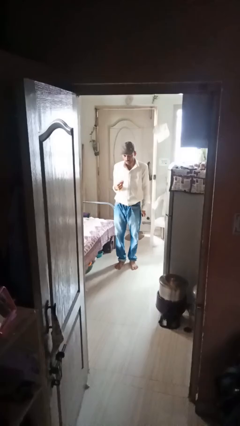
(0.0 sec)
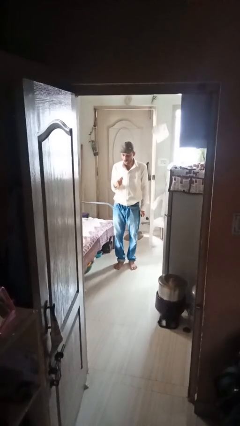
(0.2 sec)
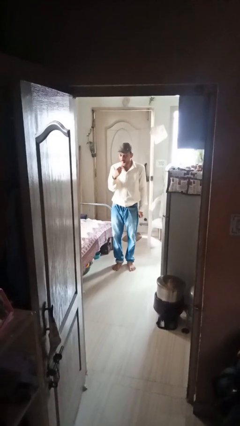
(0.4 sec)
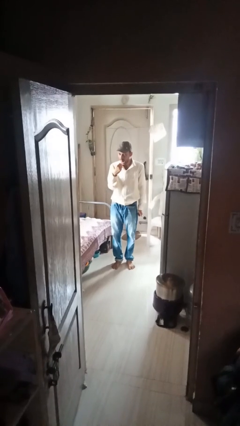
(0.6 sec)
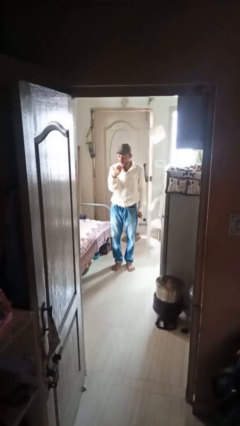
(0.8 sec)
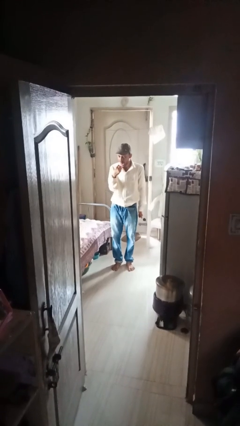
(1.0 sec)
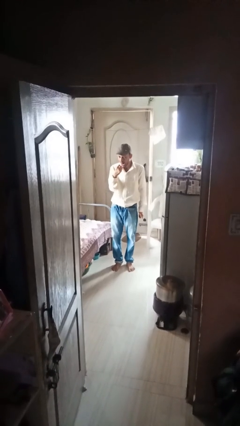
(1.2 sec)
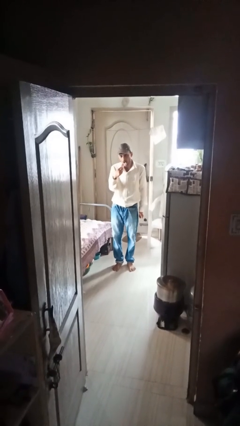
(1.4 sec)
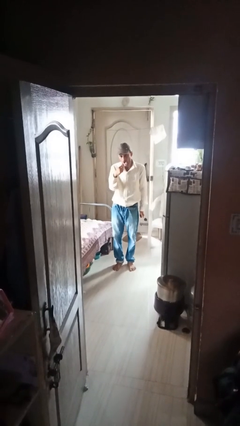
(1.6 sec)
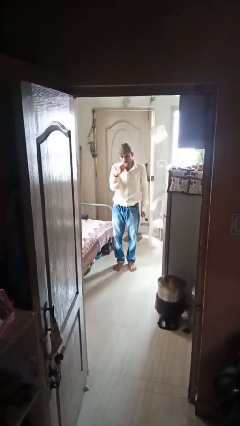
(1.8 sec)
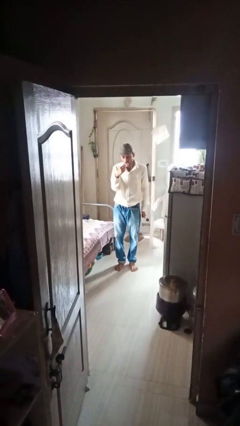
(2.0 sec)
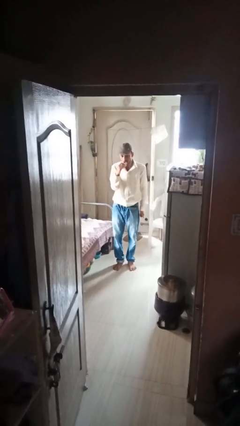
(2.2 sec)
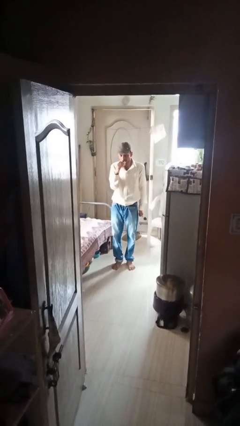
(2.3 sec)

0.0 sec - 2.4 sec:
person brushes teeth

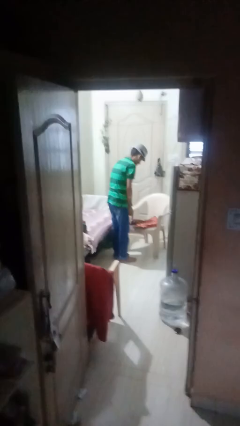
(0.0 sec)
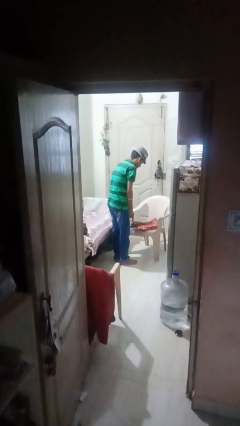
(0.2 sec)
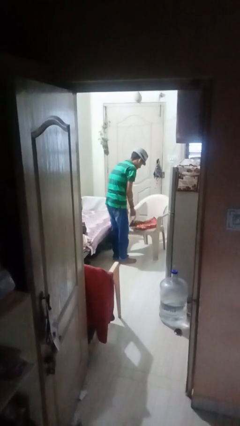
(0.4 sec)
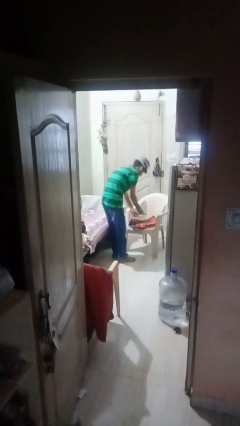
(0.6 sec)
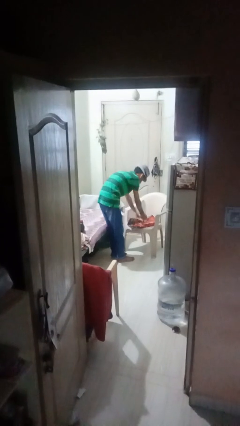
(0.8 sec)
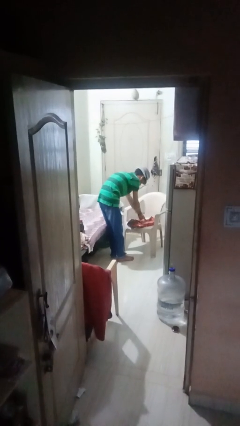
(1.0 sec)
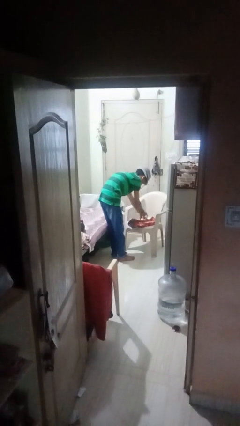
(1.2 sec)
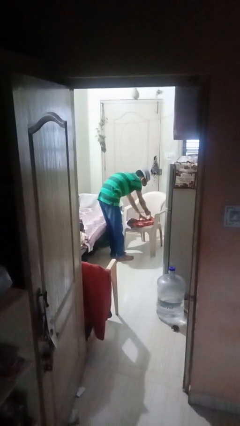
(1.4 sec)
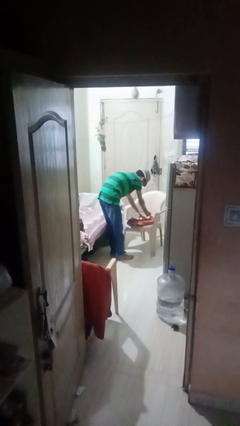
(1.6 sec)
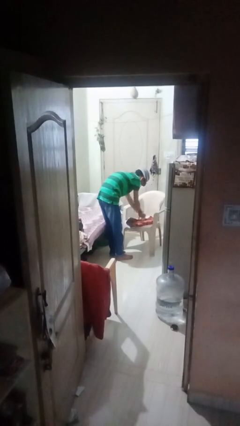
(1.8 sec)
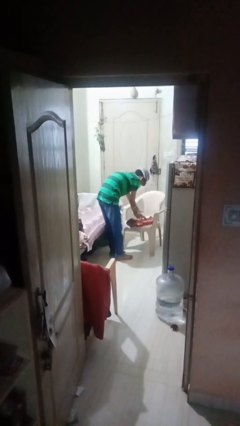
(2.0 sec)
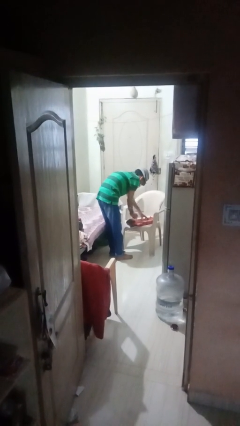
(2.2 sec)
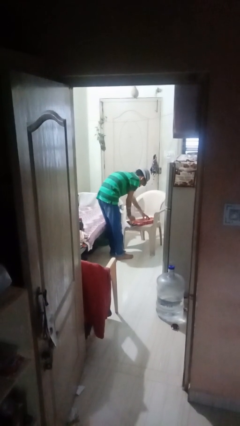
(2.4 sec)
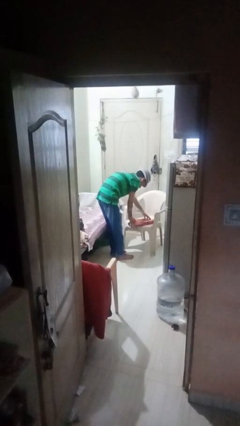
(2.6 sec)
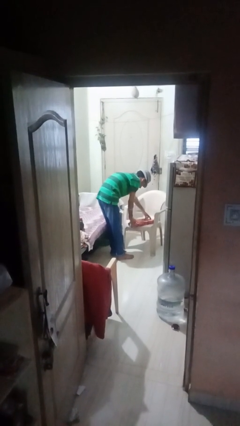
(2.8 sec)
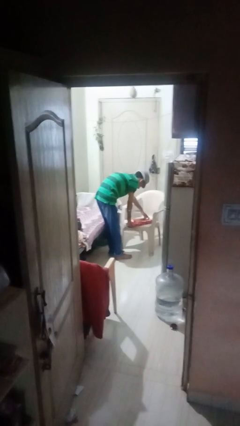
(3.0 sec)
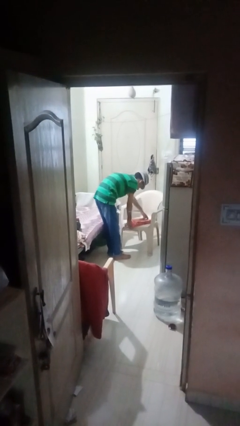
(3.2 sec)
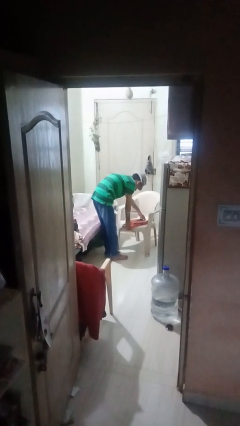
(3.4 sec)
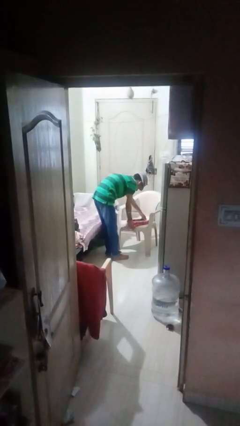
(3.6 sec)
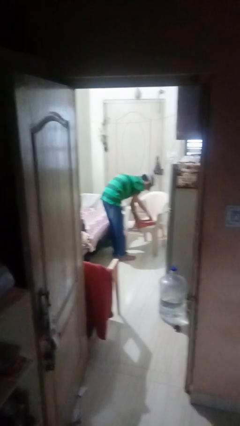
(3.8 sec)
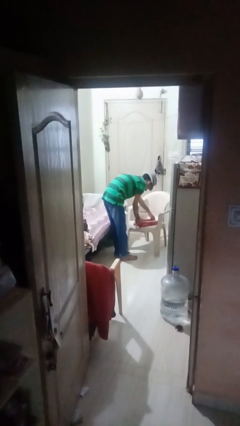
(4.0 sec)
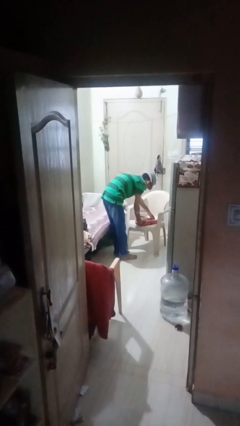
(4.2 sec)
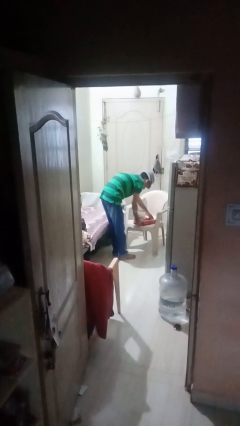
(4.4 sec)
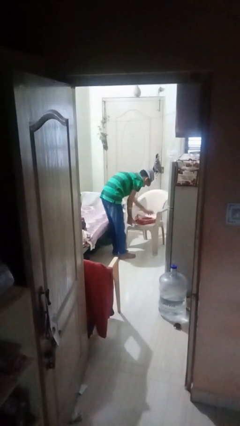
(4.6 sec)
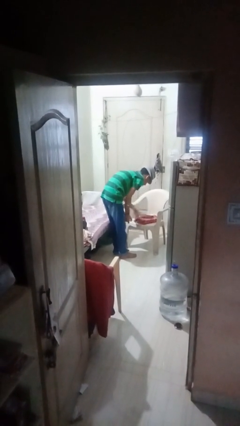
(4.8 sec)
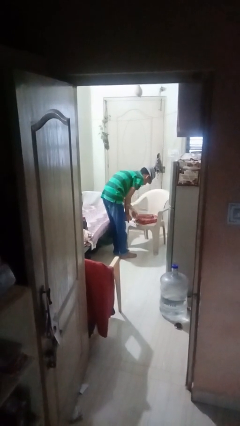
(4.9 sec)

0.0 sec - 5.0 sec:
person wraps box

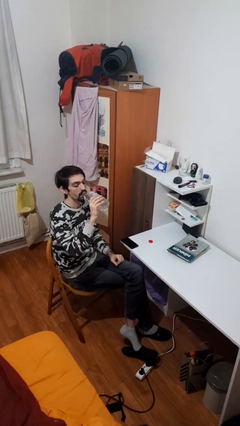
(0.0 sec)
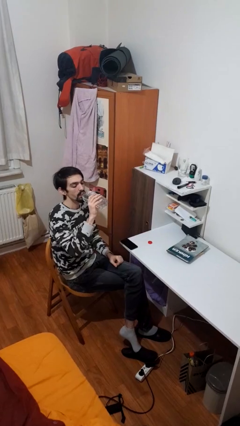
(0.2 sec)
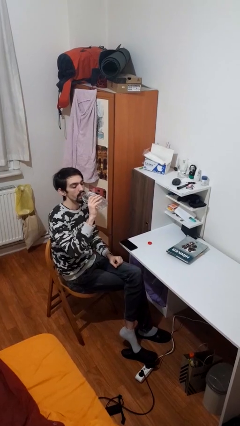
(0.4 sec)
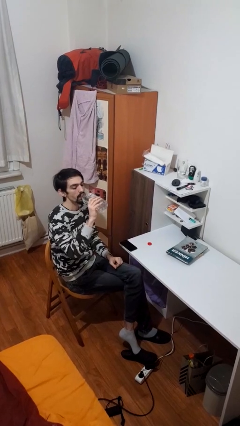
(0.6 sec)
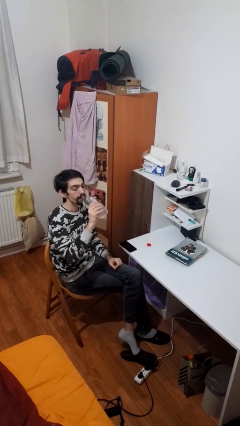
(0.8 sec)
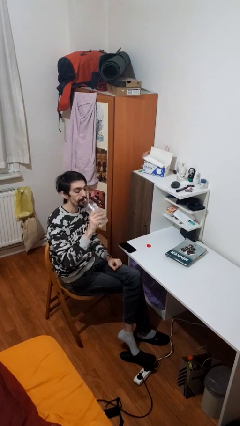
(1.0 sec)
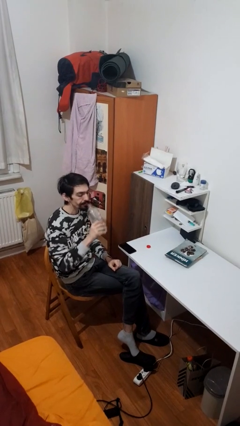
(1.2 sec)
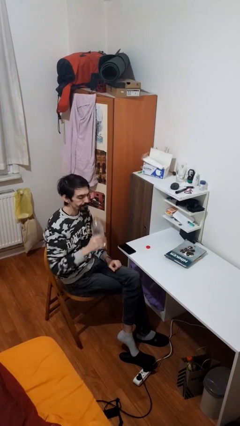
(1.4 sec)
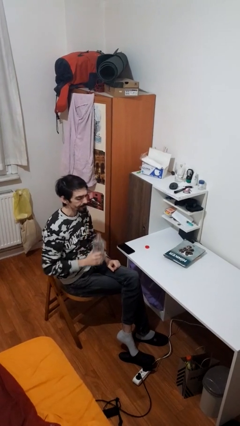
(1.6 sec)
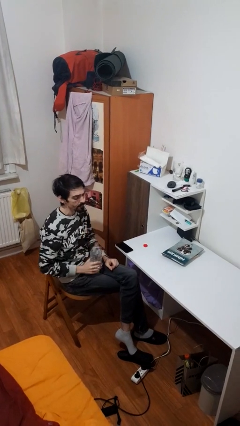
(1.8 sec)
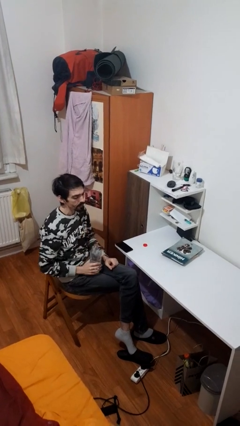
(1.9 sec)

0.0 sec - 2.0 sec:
person drinks from bottle

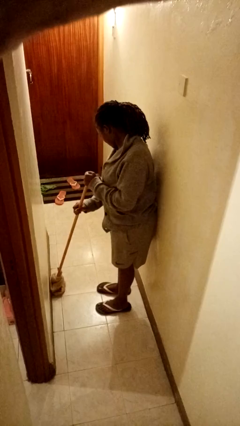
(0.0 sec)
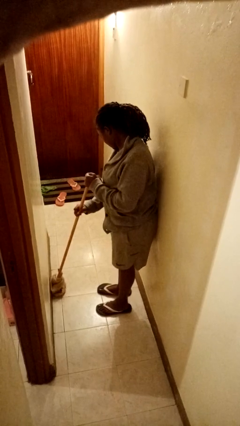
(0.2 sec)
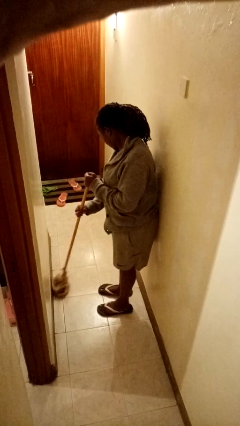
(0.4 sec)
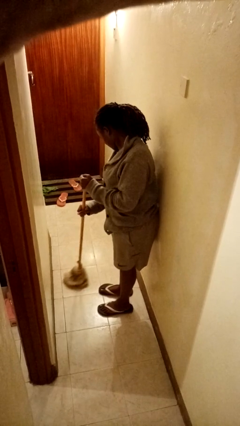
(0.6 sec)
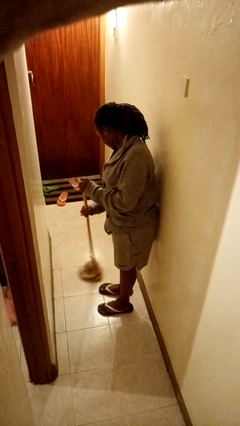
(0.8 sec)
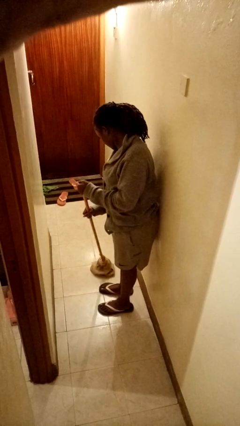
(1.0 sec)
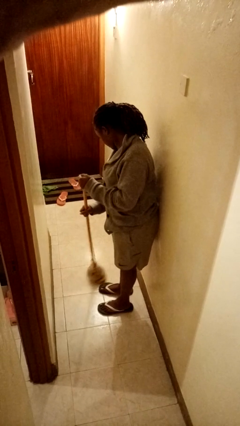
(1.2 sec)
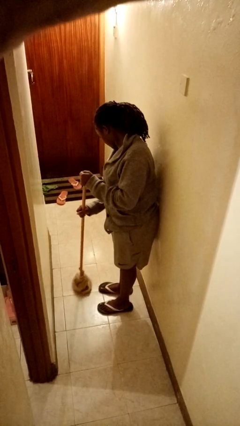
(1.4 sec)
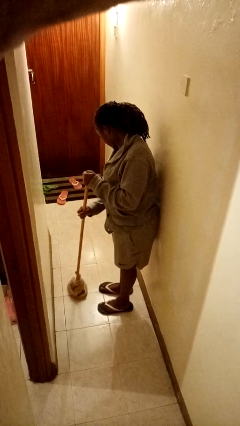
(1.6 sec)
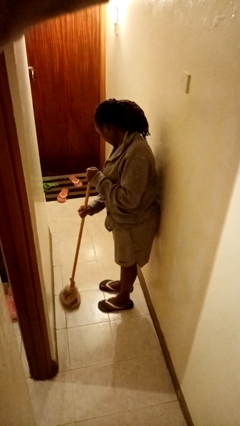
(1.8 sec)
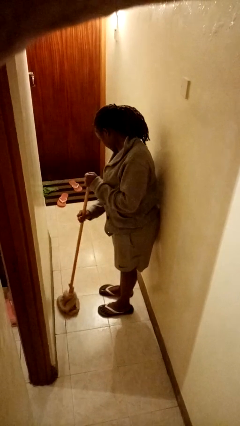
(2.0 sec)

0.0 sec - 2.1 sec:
person mops

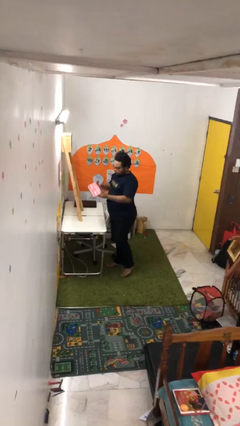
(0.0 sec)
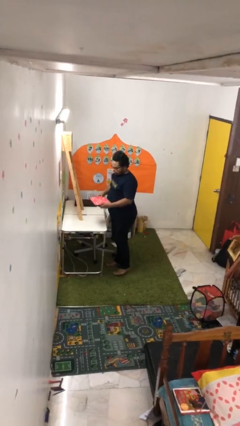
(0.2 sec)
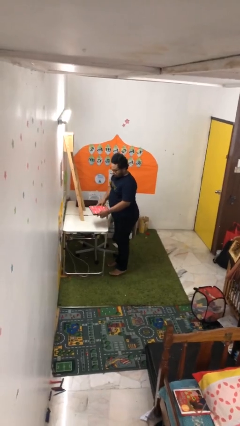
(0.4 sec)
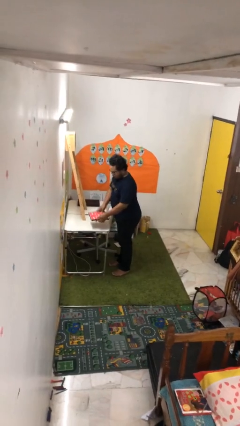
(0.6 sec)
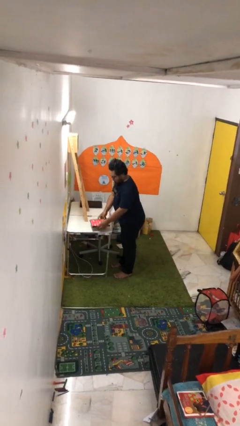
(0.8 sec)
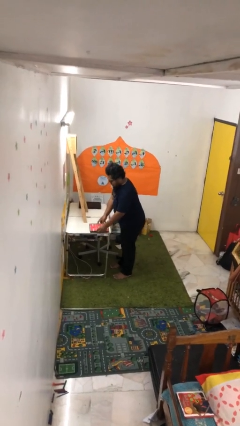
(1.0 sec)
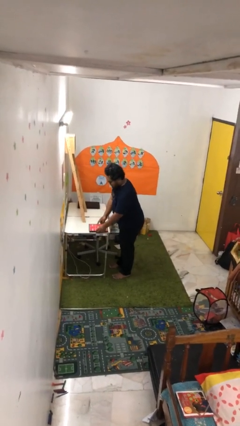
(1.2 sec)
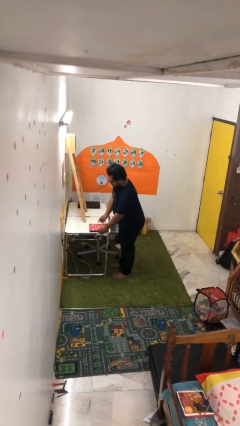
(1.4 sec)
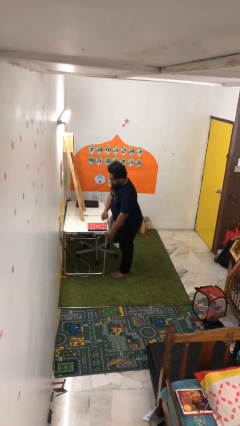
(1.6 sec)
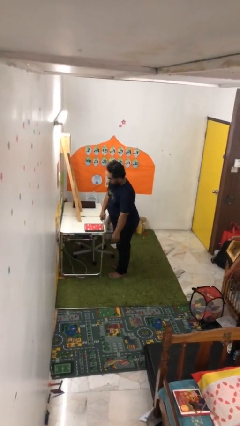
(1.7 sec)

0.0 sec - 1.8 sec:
person puts down object on table

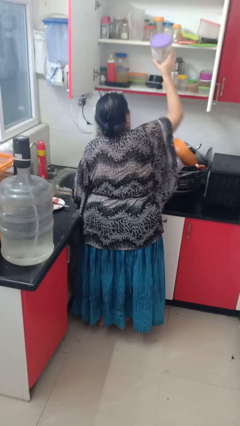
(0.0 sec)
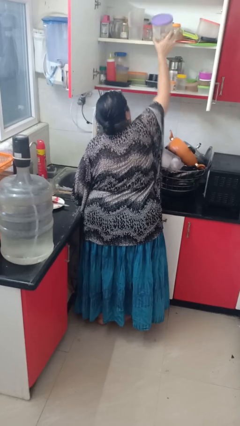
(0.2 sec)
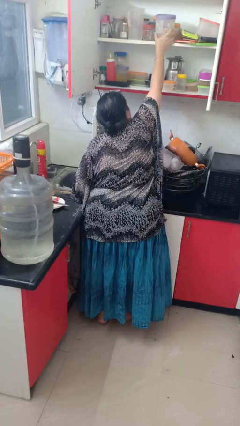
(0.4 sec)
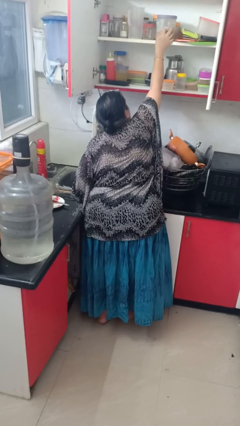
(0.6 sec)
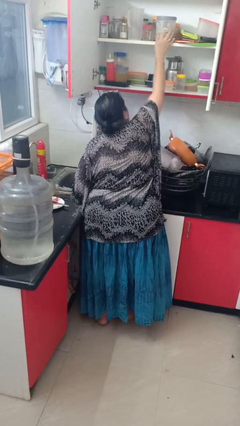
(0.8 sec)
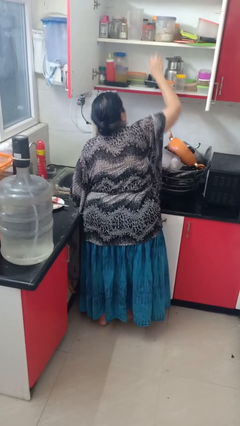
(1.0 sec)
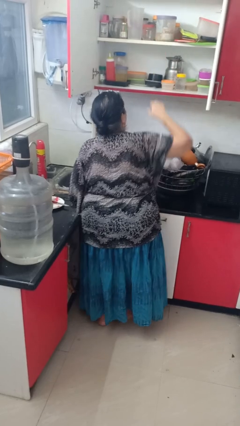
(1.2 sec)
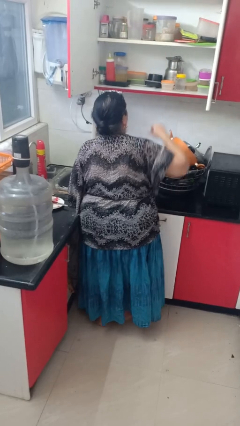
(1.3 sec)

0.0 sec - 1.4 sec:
person takes object from cabinet

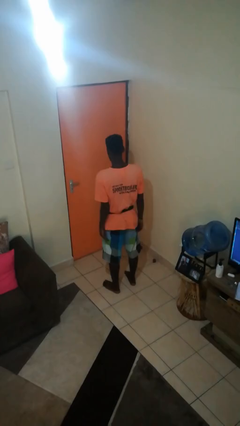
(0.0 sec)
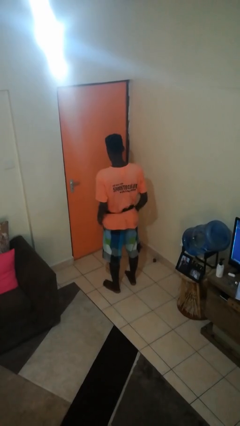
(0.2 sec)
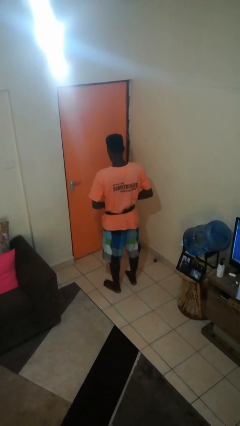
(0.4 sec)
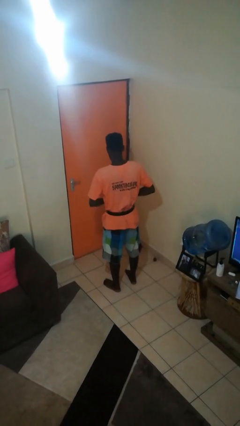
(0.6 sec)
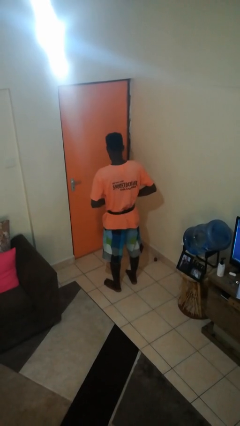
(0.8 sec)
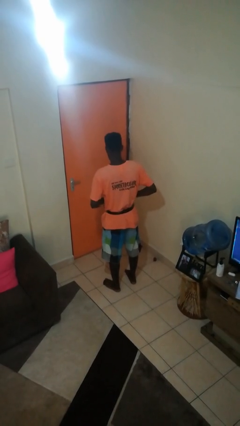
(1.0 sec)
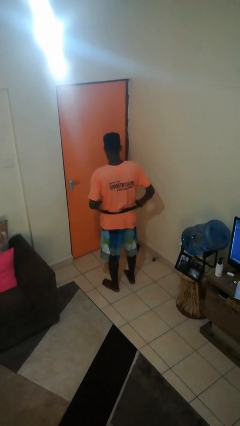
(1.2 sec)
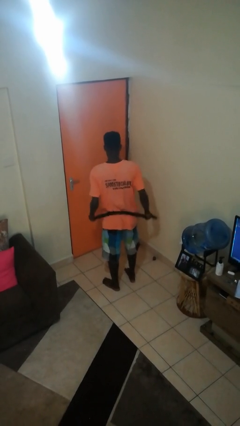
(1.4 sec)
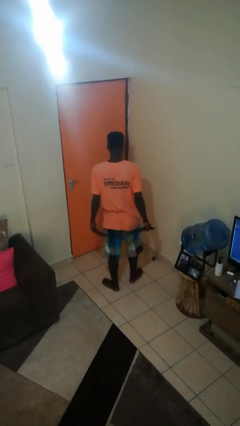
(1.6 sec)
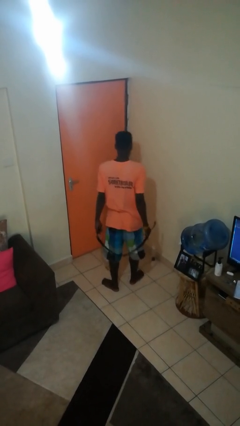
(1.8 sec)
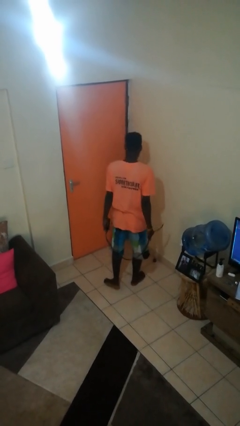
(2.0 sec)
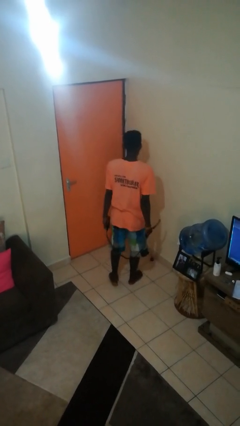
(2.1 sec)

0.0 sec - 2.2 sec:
person takes off belt

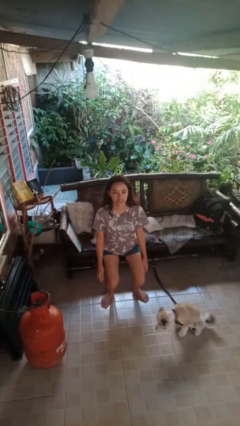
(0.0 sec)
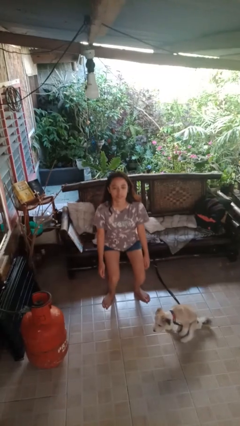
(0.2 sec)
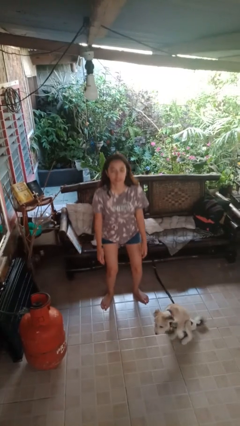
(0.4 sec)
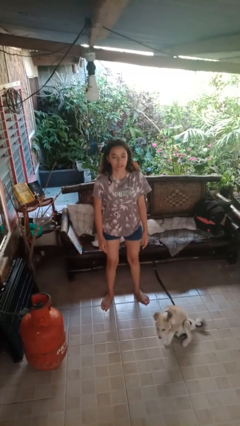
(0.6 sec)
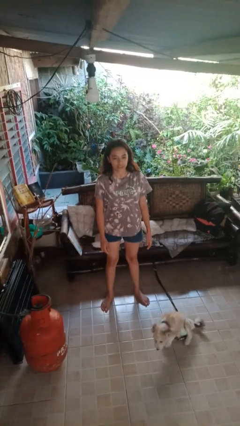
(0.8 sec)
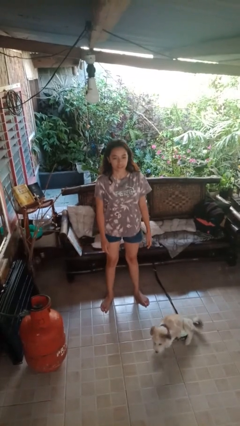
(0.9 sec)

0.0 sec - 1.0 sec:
person stands up
